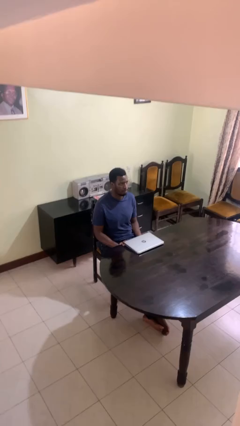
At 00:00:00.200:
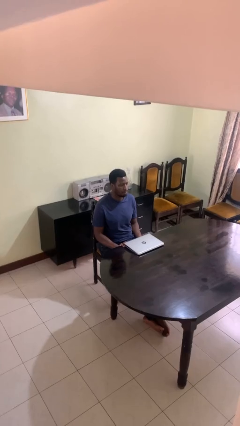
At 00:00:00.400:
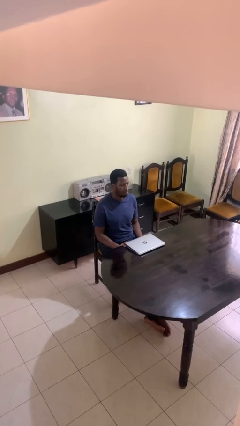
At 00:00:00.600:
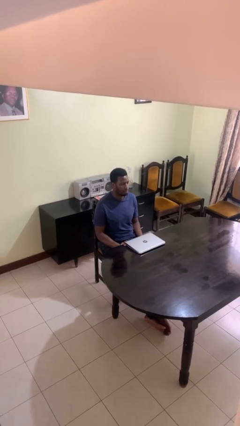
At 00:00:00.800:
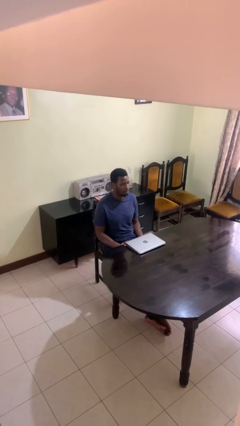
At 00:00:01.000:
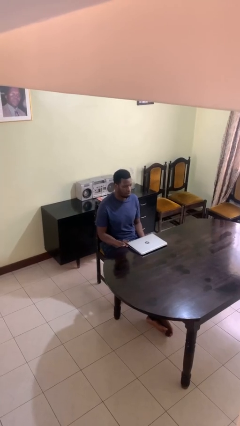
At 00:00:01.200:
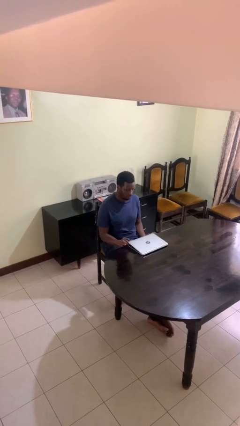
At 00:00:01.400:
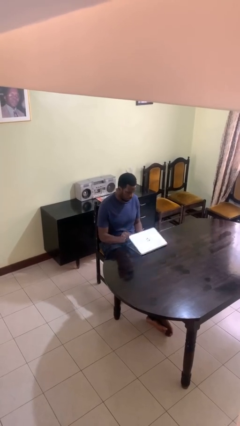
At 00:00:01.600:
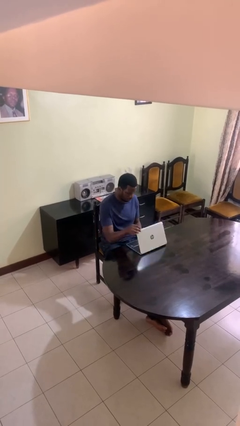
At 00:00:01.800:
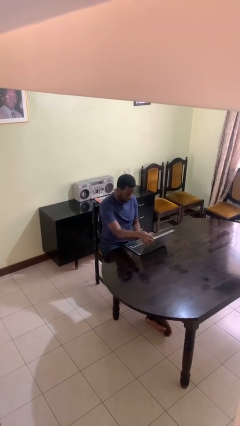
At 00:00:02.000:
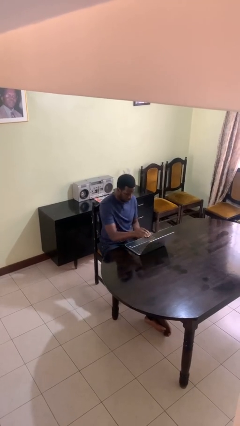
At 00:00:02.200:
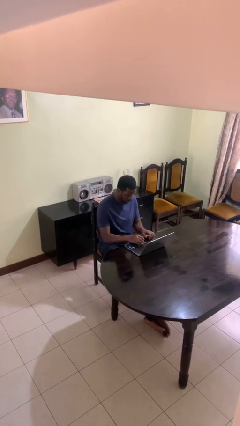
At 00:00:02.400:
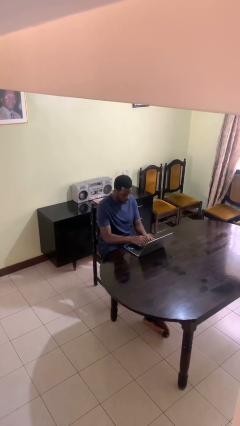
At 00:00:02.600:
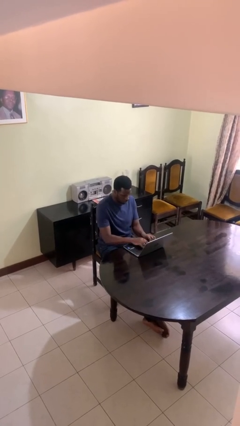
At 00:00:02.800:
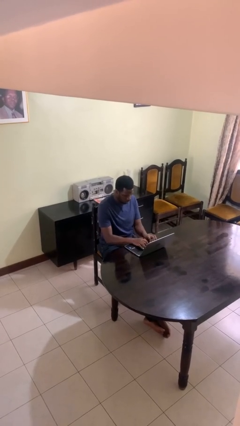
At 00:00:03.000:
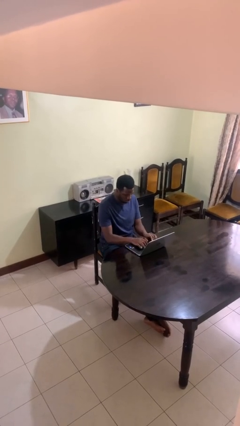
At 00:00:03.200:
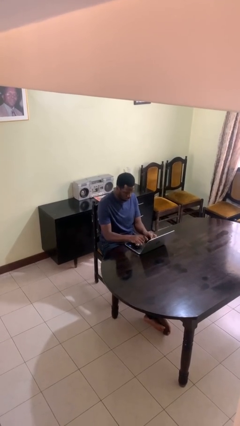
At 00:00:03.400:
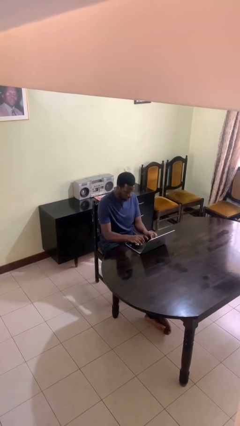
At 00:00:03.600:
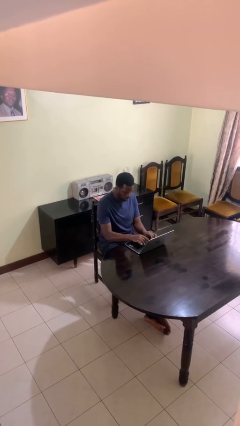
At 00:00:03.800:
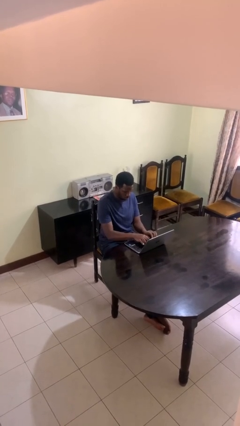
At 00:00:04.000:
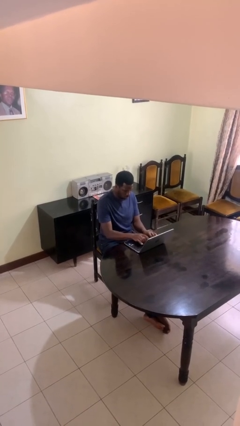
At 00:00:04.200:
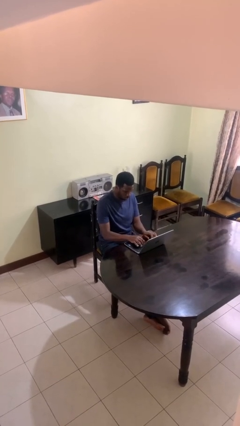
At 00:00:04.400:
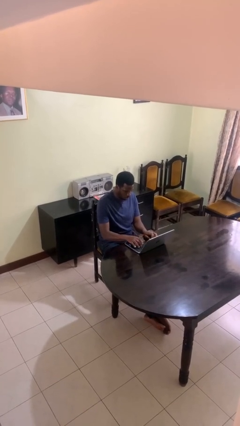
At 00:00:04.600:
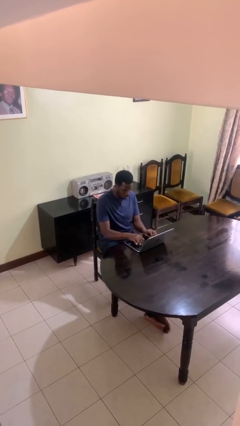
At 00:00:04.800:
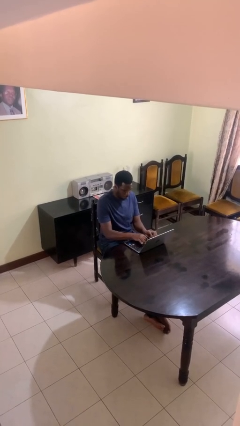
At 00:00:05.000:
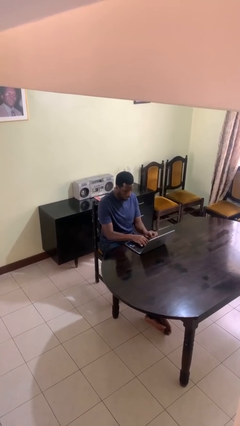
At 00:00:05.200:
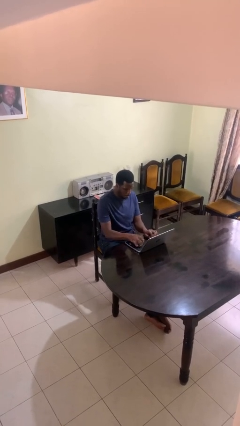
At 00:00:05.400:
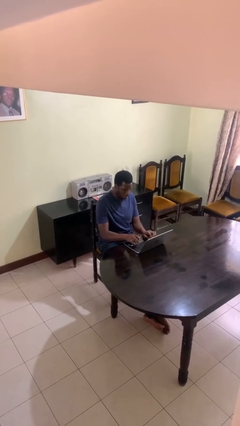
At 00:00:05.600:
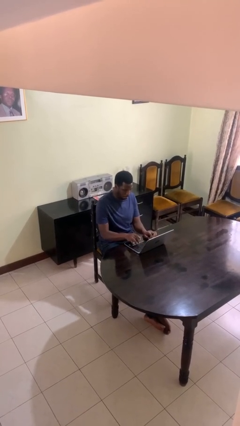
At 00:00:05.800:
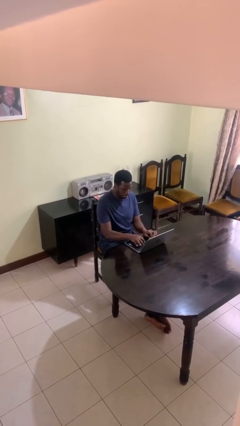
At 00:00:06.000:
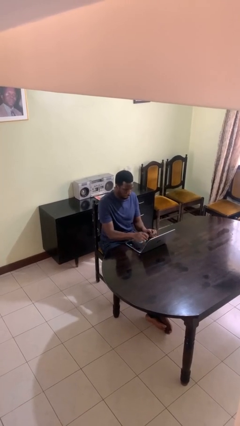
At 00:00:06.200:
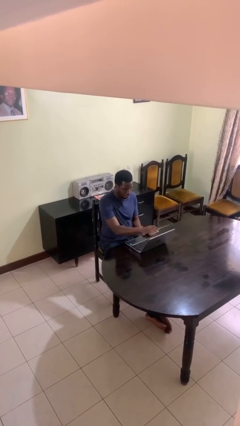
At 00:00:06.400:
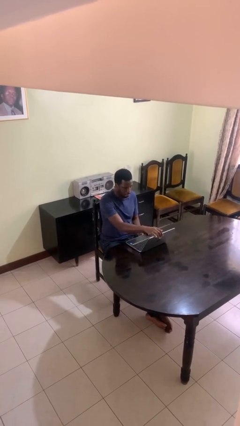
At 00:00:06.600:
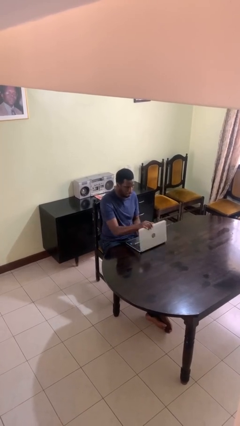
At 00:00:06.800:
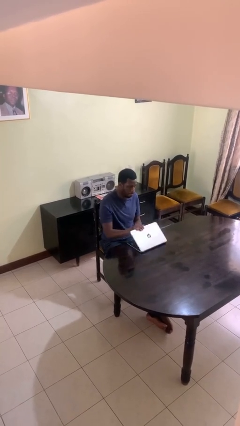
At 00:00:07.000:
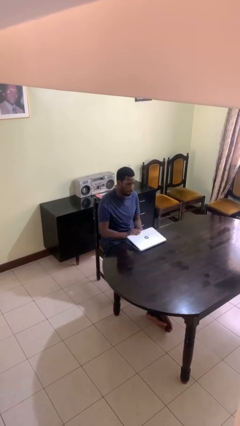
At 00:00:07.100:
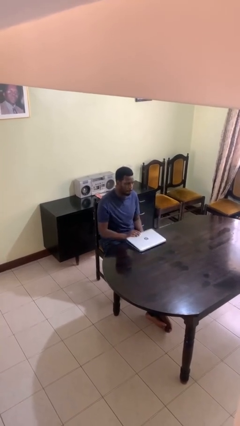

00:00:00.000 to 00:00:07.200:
person interacts with laptop

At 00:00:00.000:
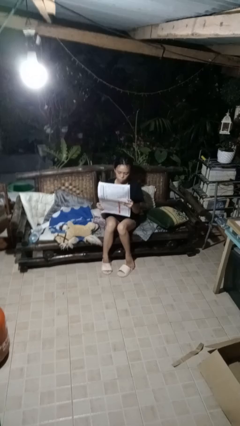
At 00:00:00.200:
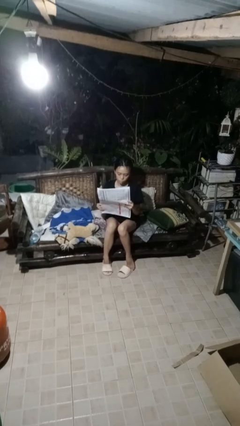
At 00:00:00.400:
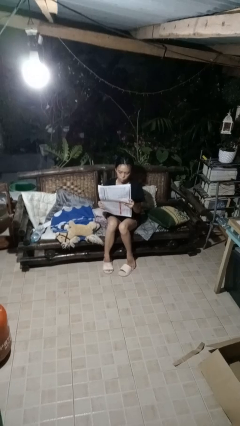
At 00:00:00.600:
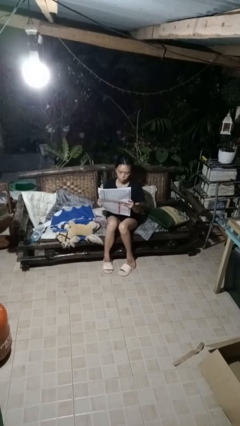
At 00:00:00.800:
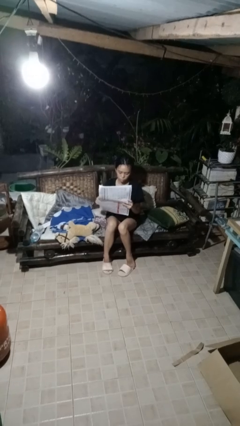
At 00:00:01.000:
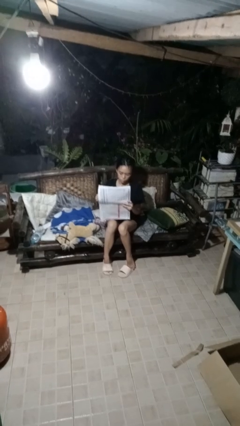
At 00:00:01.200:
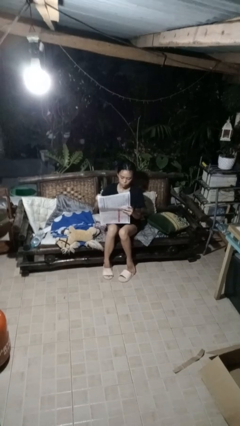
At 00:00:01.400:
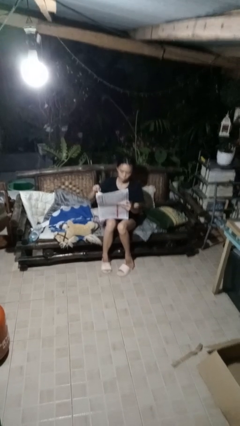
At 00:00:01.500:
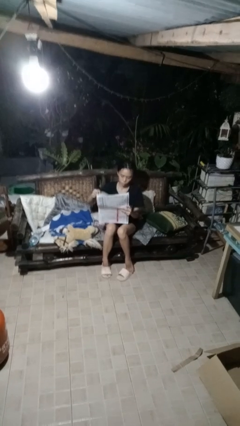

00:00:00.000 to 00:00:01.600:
person reads newspaper

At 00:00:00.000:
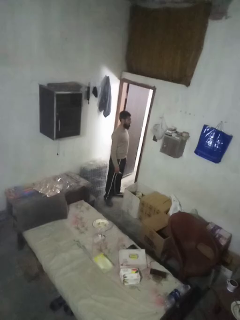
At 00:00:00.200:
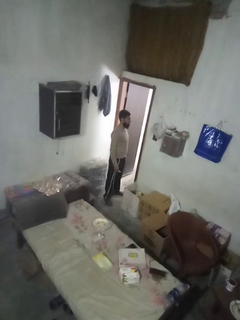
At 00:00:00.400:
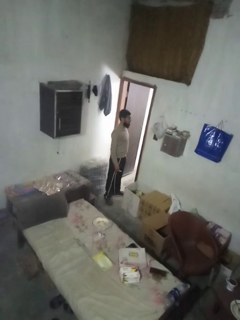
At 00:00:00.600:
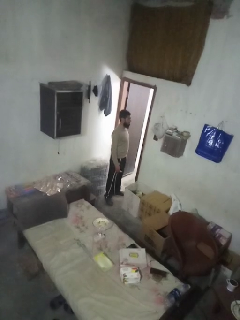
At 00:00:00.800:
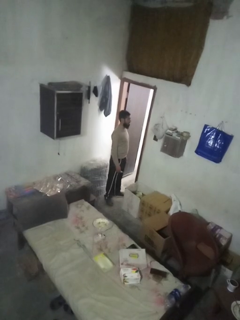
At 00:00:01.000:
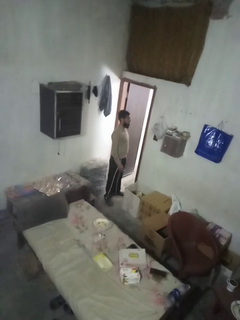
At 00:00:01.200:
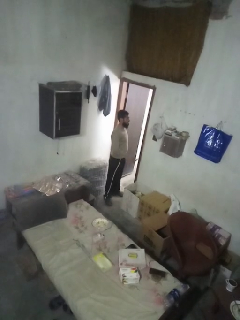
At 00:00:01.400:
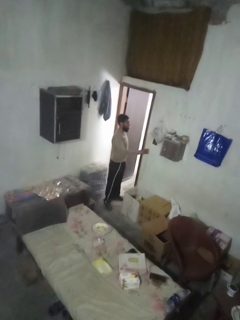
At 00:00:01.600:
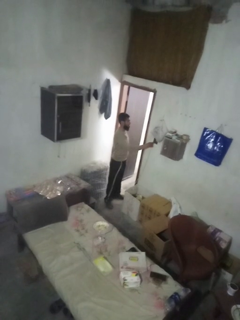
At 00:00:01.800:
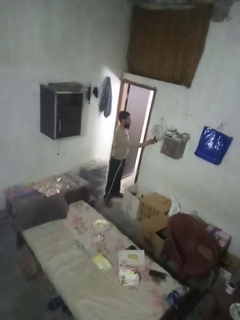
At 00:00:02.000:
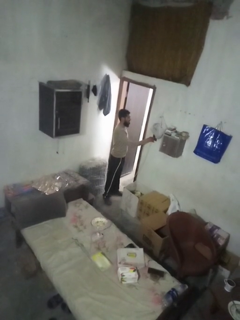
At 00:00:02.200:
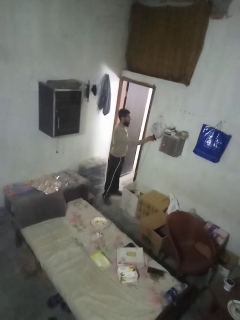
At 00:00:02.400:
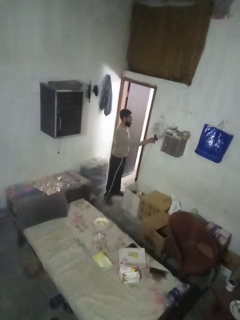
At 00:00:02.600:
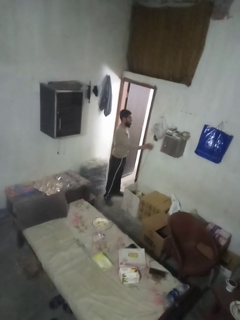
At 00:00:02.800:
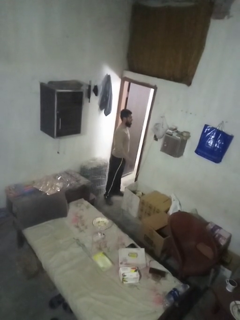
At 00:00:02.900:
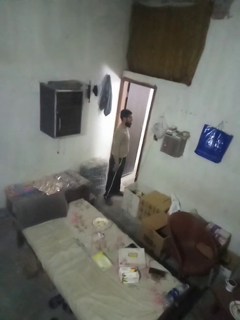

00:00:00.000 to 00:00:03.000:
person plugs into electrical socket

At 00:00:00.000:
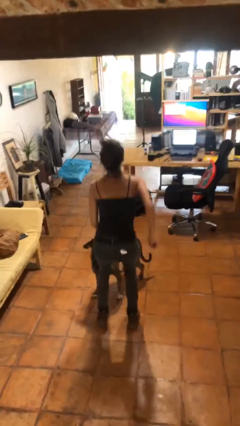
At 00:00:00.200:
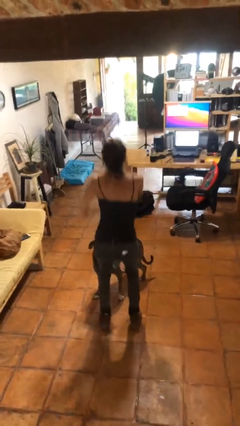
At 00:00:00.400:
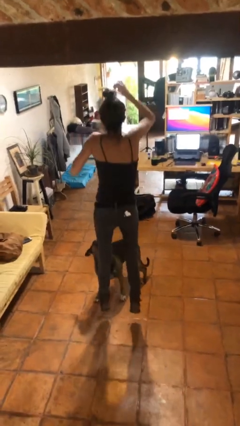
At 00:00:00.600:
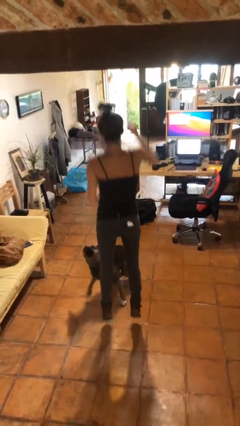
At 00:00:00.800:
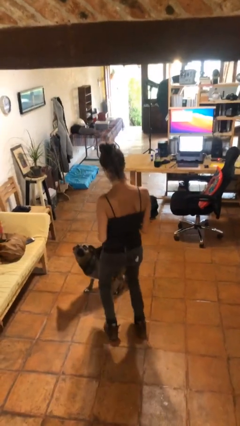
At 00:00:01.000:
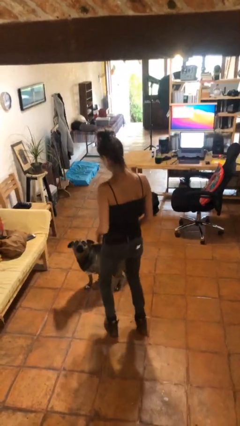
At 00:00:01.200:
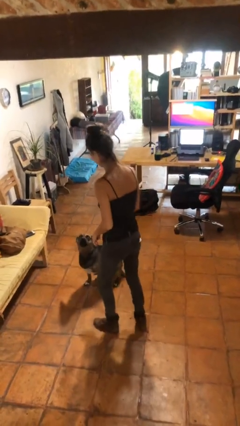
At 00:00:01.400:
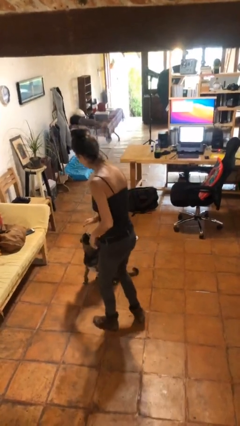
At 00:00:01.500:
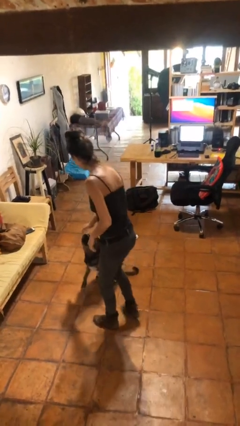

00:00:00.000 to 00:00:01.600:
person jumps

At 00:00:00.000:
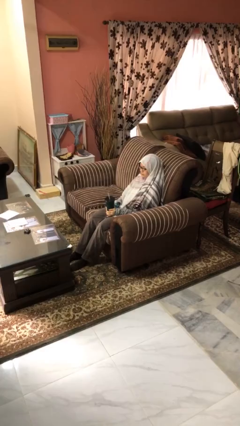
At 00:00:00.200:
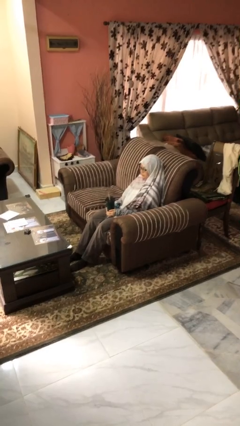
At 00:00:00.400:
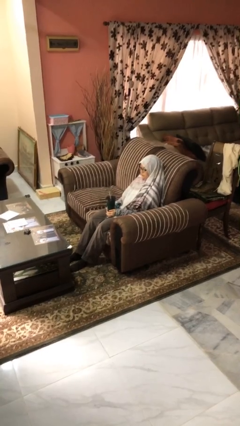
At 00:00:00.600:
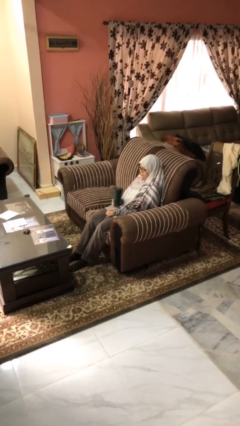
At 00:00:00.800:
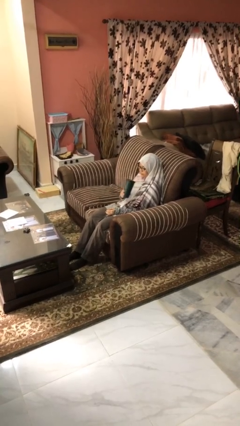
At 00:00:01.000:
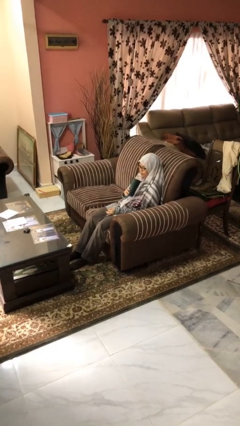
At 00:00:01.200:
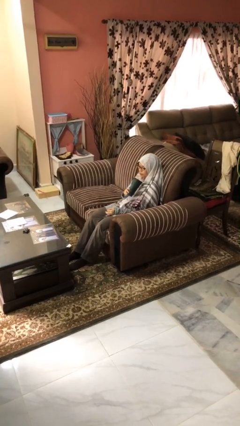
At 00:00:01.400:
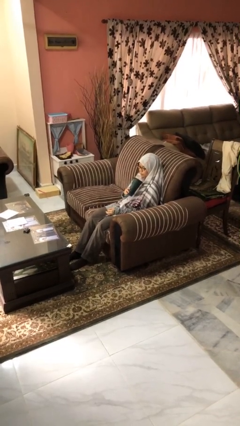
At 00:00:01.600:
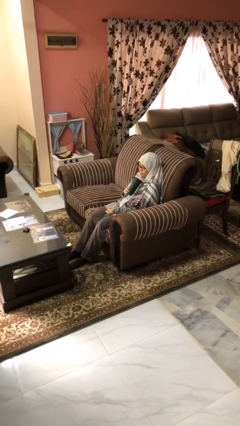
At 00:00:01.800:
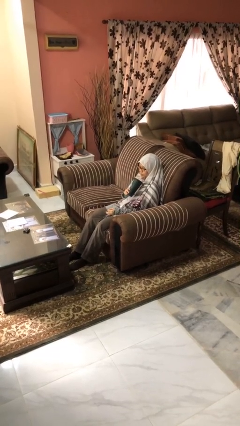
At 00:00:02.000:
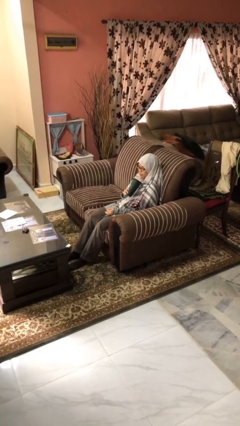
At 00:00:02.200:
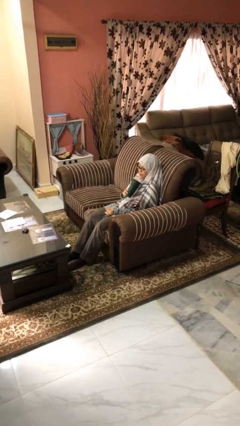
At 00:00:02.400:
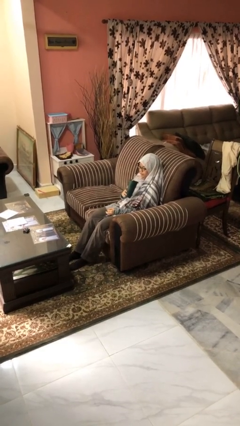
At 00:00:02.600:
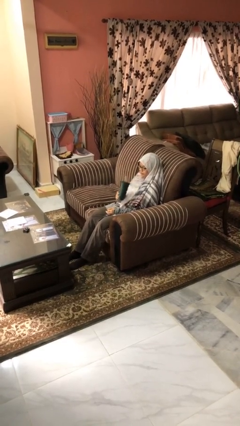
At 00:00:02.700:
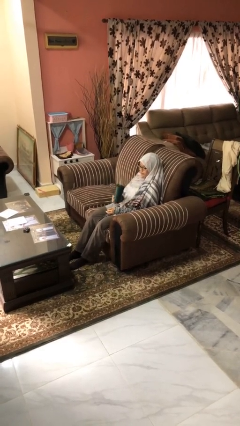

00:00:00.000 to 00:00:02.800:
person drinks from straw

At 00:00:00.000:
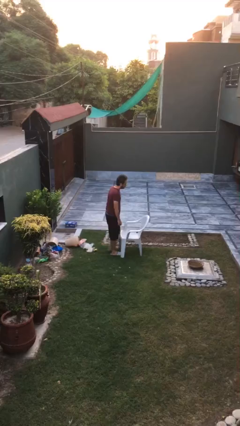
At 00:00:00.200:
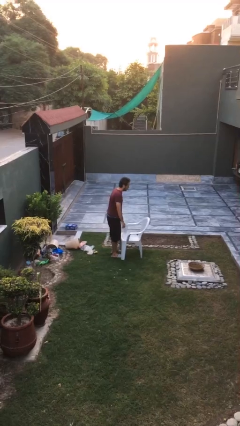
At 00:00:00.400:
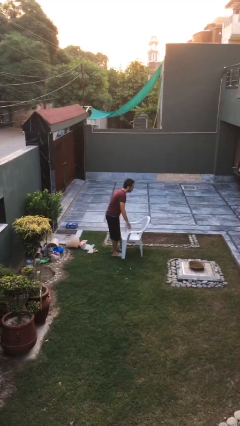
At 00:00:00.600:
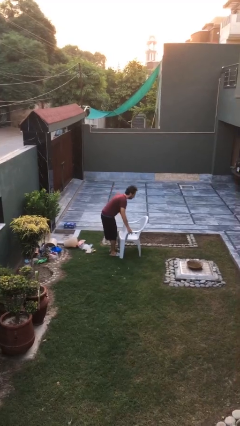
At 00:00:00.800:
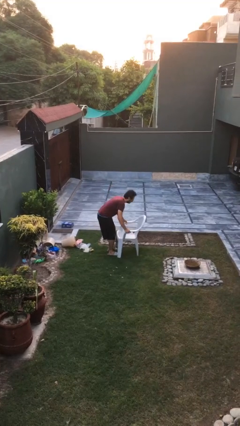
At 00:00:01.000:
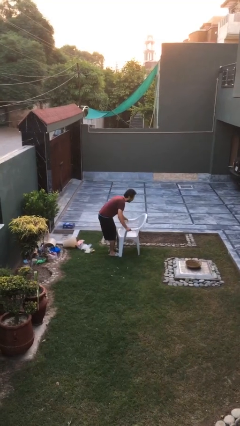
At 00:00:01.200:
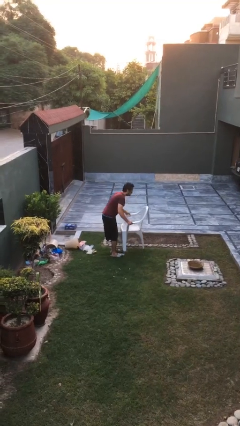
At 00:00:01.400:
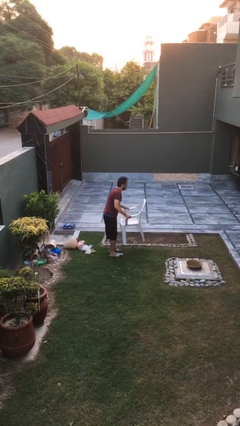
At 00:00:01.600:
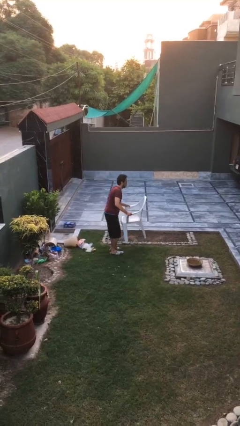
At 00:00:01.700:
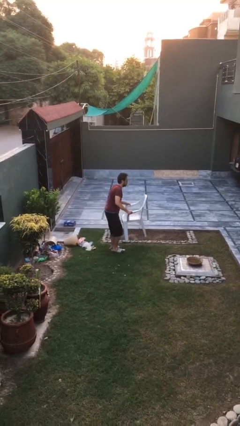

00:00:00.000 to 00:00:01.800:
person picks up object from floor

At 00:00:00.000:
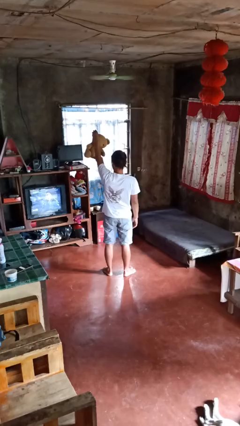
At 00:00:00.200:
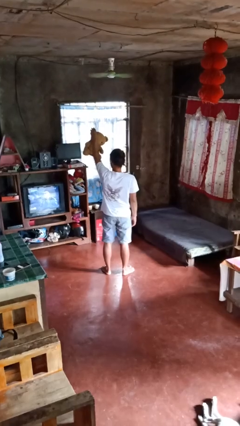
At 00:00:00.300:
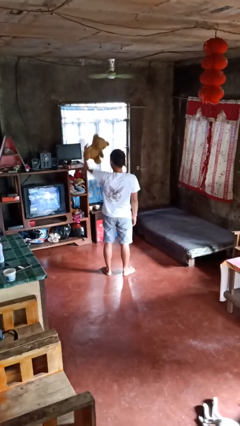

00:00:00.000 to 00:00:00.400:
person drops object
